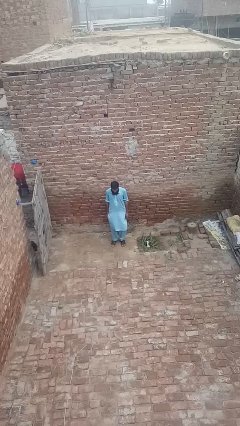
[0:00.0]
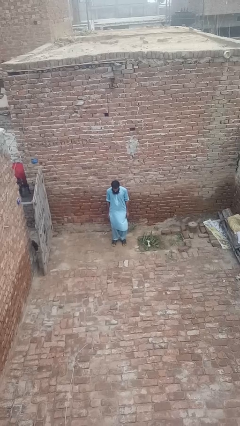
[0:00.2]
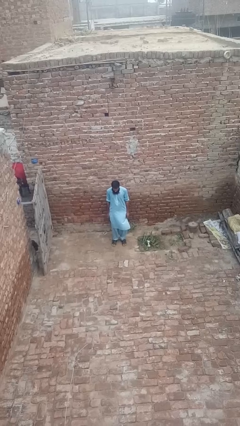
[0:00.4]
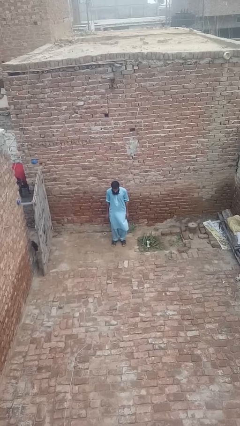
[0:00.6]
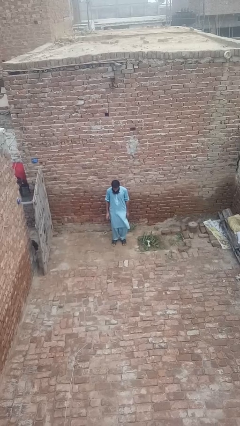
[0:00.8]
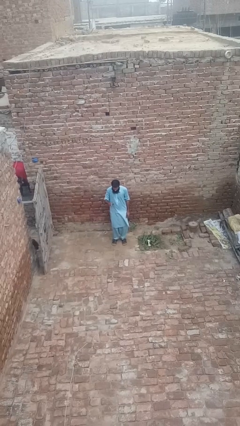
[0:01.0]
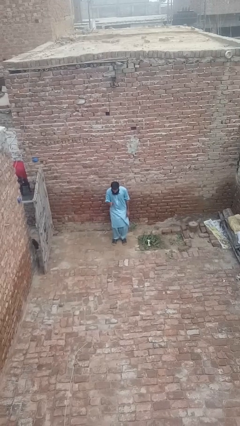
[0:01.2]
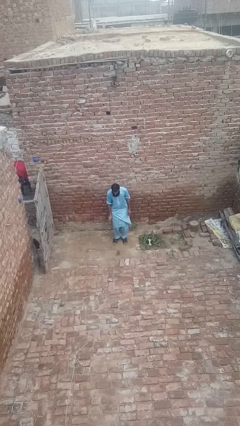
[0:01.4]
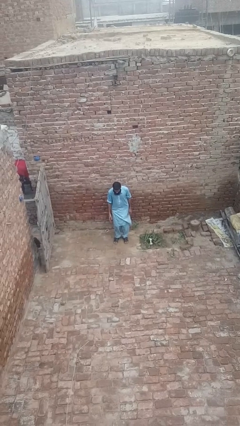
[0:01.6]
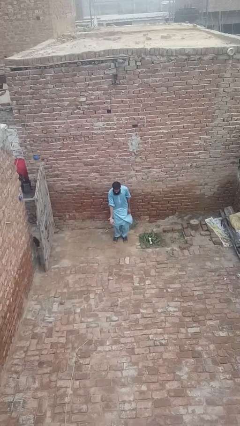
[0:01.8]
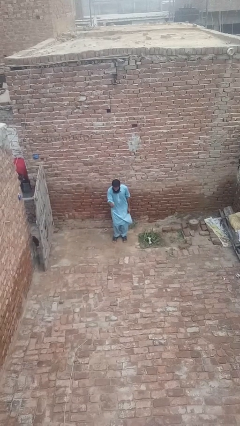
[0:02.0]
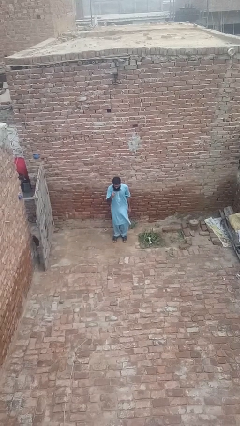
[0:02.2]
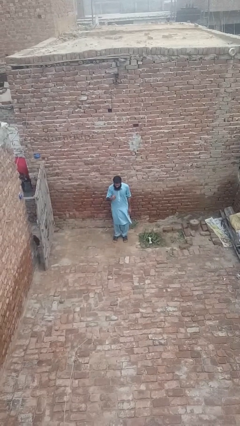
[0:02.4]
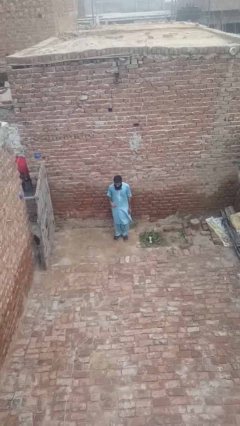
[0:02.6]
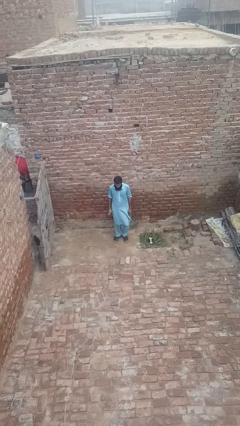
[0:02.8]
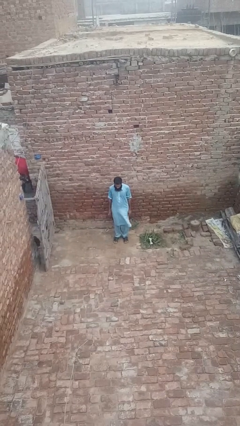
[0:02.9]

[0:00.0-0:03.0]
person bounces ball on floor

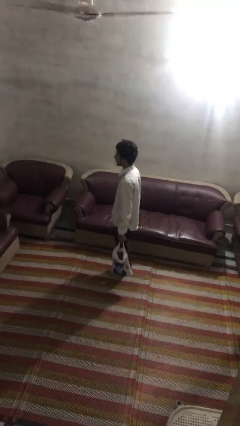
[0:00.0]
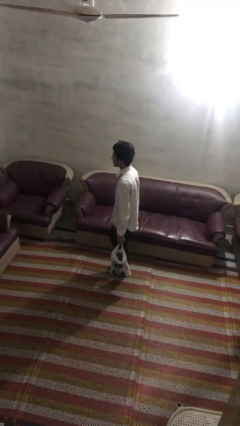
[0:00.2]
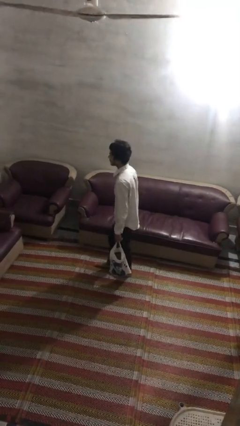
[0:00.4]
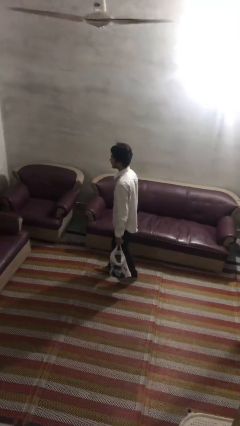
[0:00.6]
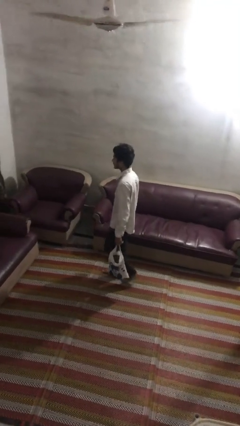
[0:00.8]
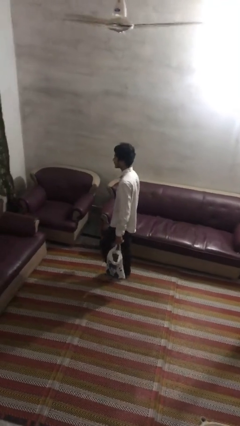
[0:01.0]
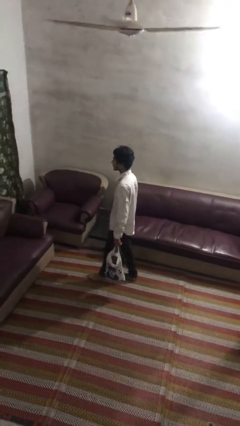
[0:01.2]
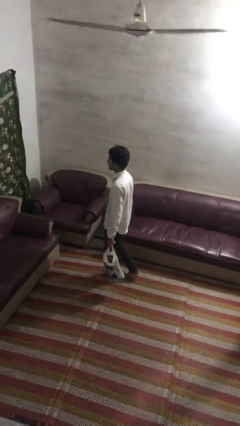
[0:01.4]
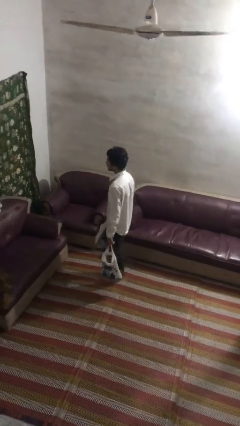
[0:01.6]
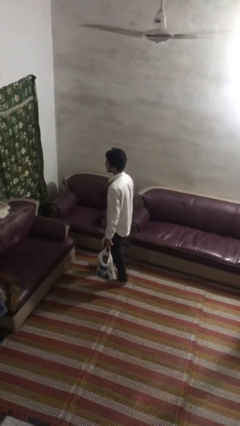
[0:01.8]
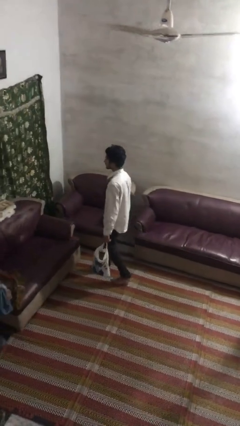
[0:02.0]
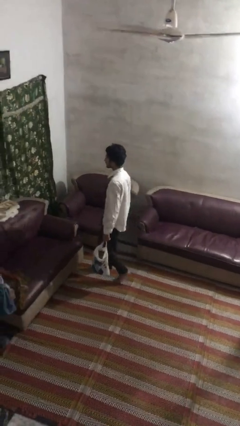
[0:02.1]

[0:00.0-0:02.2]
person carries groceries

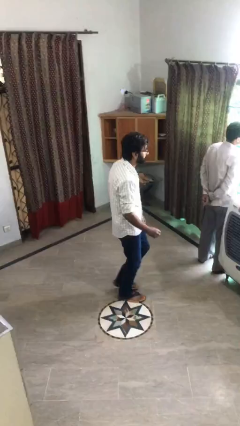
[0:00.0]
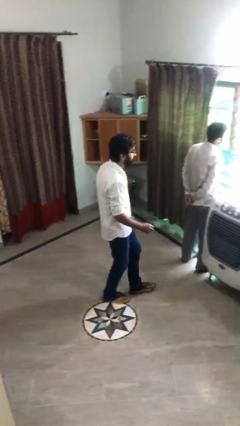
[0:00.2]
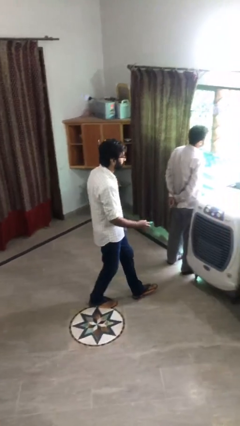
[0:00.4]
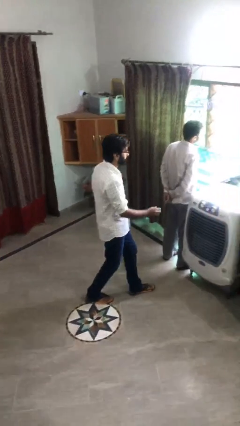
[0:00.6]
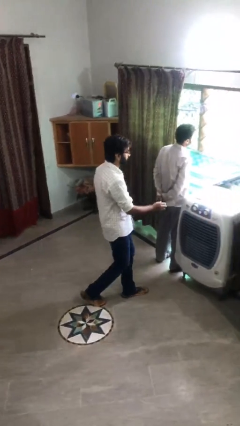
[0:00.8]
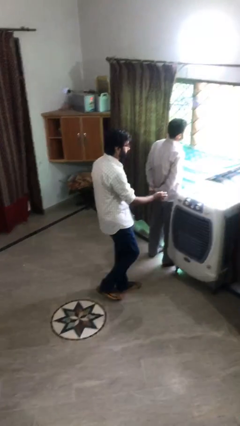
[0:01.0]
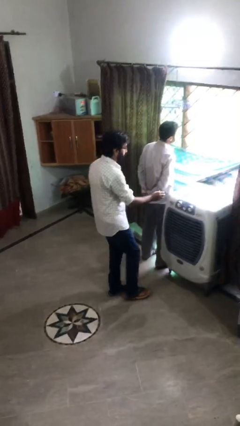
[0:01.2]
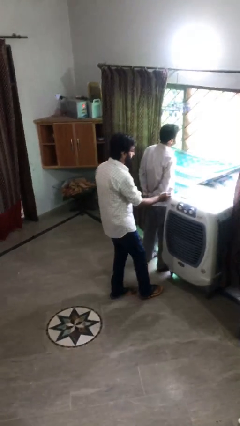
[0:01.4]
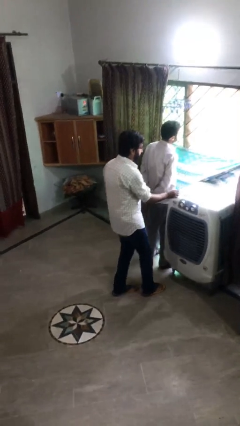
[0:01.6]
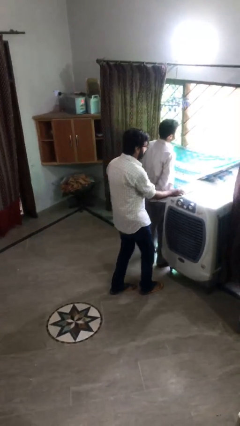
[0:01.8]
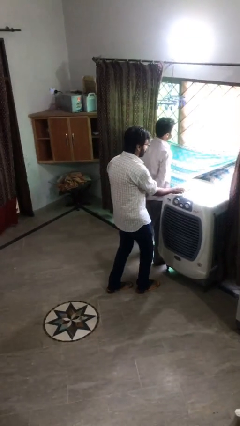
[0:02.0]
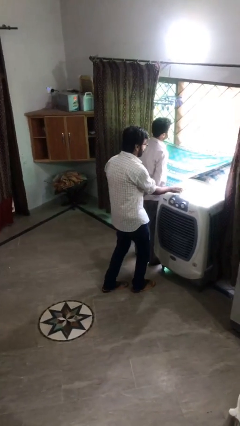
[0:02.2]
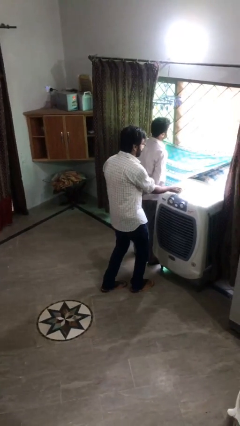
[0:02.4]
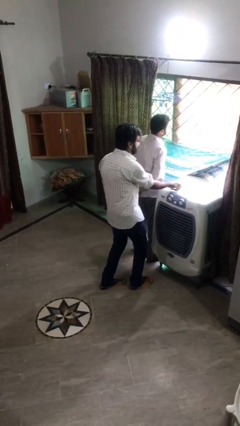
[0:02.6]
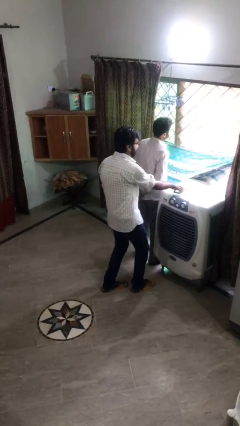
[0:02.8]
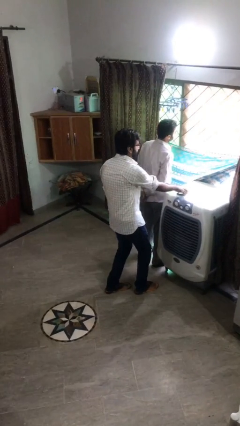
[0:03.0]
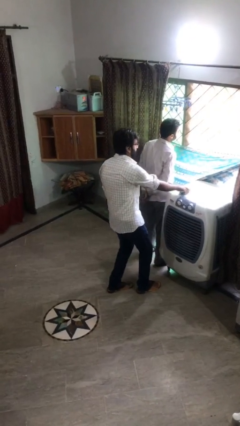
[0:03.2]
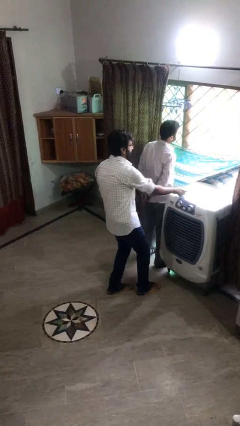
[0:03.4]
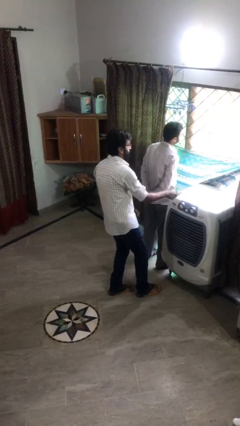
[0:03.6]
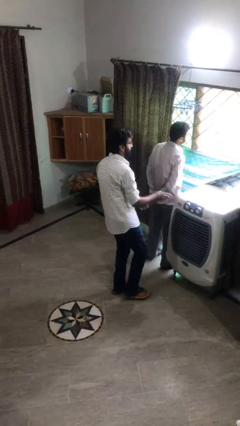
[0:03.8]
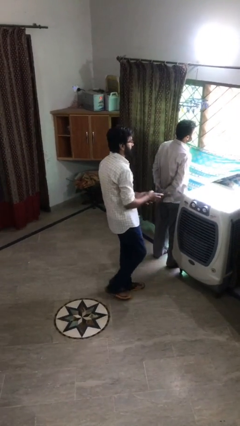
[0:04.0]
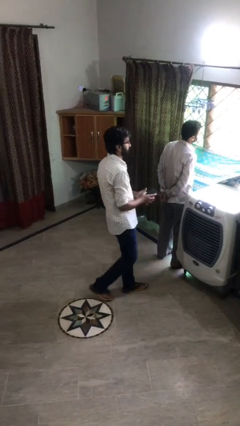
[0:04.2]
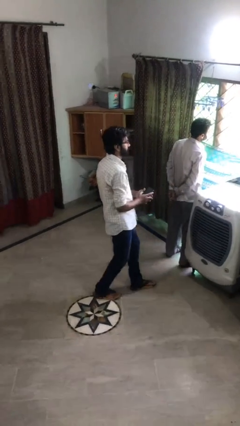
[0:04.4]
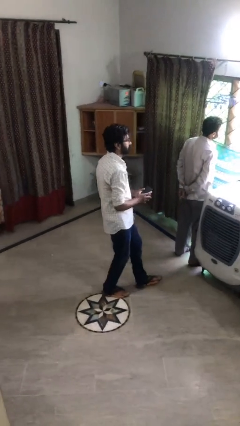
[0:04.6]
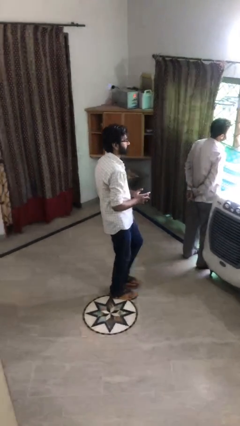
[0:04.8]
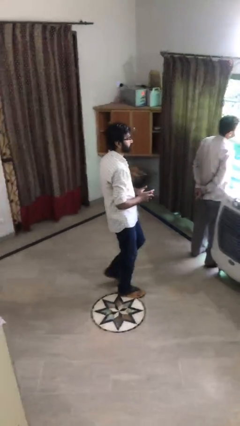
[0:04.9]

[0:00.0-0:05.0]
person steals object from person

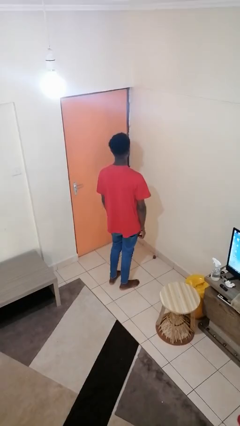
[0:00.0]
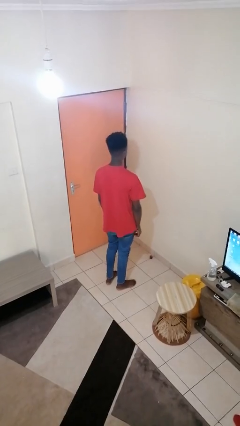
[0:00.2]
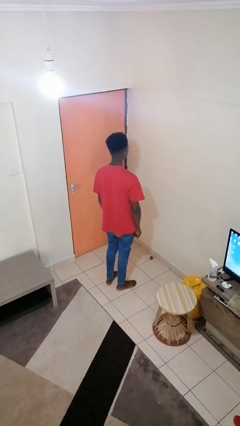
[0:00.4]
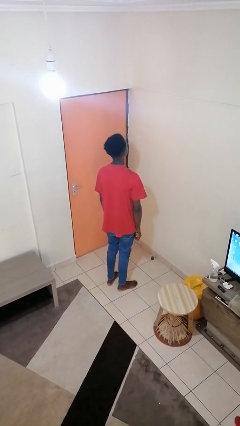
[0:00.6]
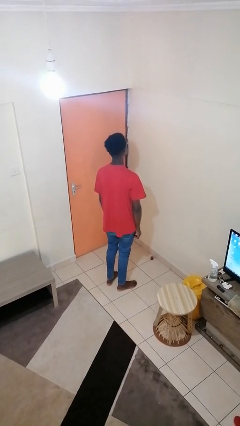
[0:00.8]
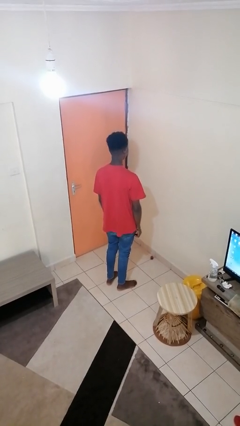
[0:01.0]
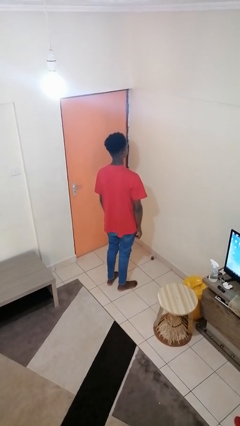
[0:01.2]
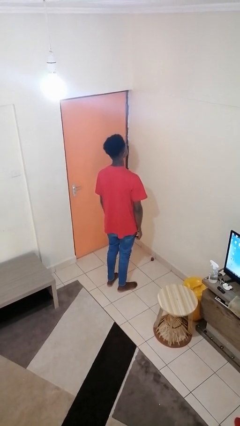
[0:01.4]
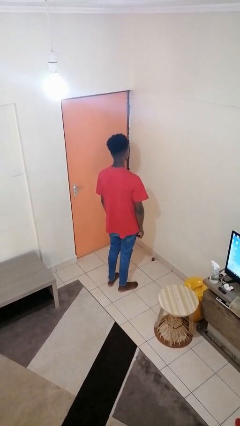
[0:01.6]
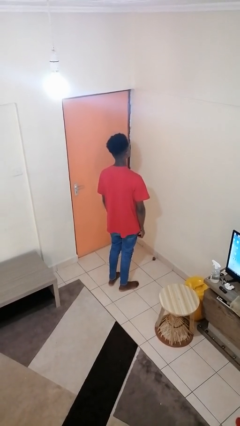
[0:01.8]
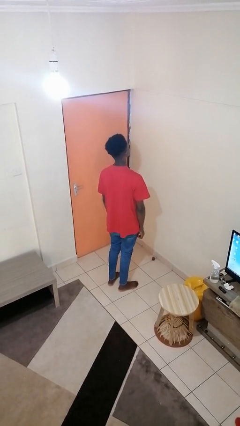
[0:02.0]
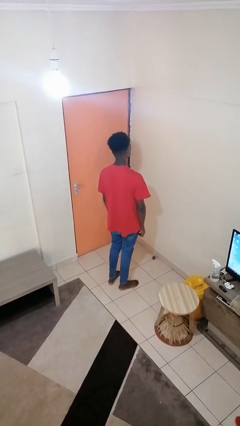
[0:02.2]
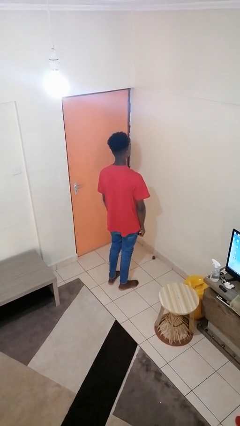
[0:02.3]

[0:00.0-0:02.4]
person nods head

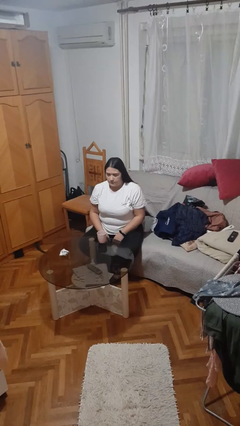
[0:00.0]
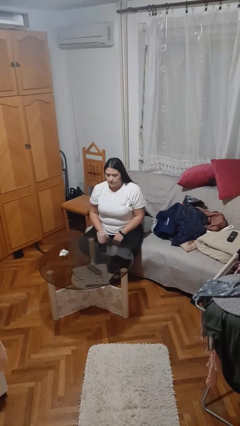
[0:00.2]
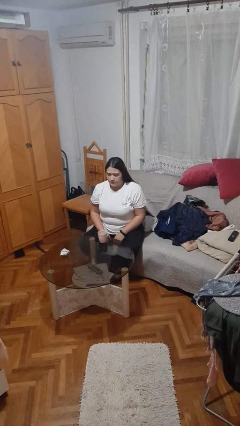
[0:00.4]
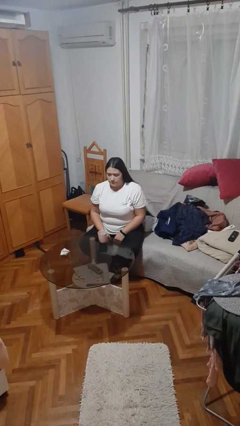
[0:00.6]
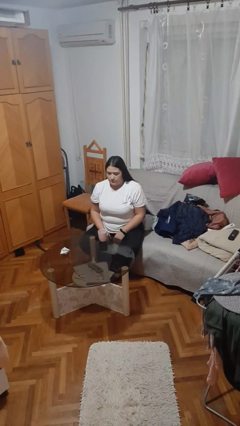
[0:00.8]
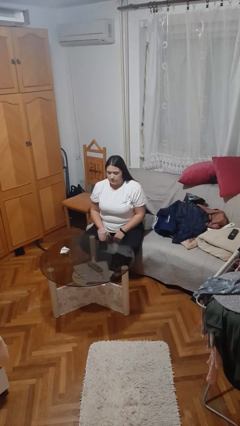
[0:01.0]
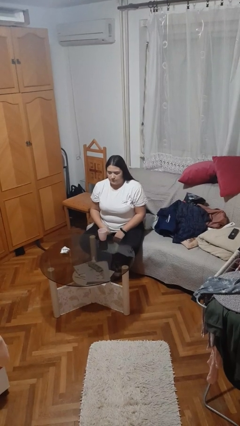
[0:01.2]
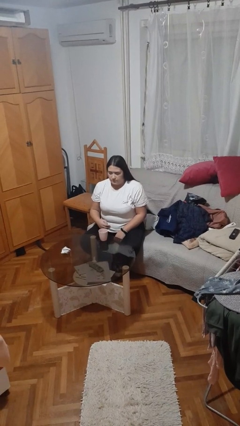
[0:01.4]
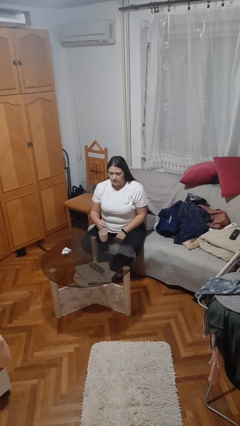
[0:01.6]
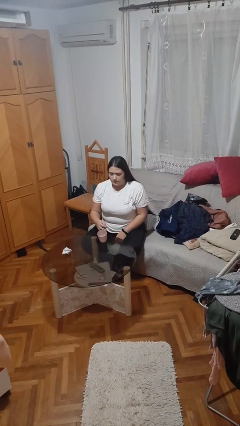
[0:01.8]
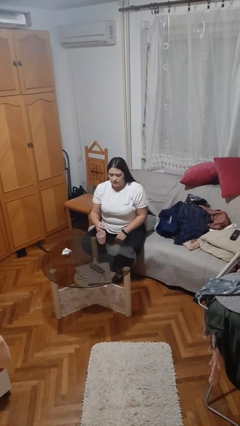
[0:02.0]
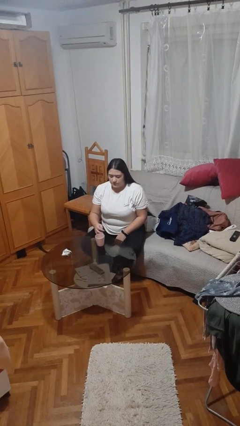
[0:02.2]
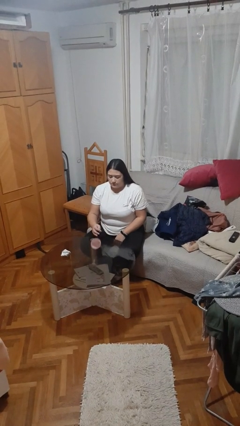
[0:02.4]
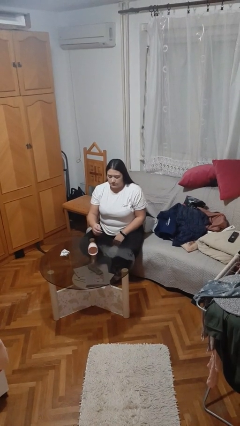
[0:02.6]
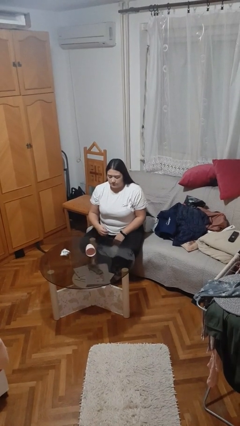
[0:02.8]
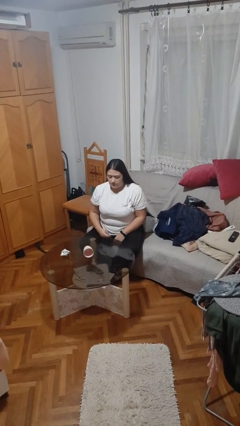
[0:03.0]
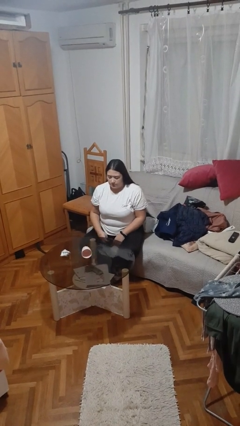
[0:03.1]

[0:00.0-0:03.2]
person spills on table

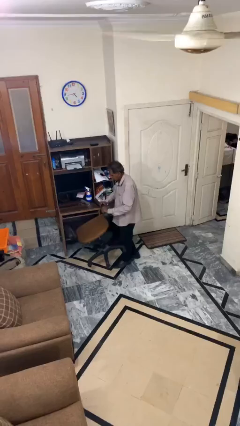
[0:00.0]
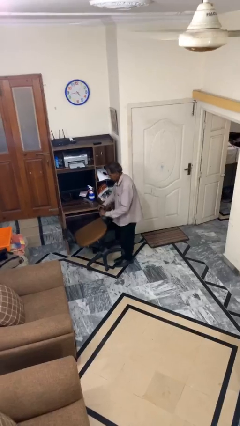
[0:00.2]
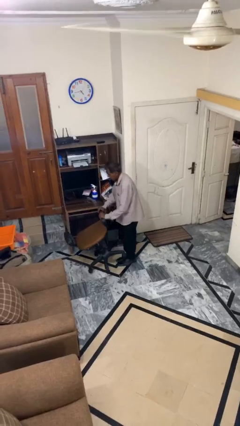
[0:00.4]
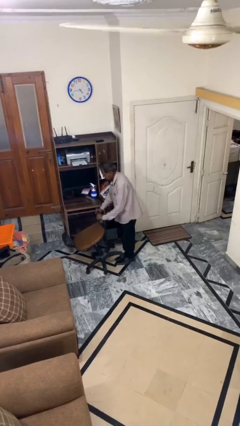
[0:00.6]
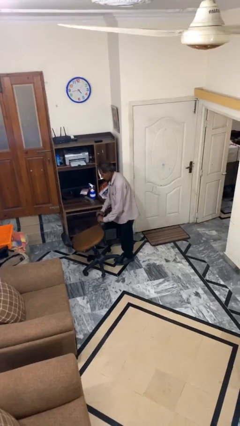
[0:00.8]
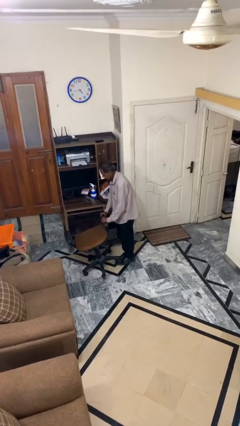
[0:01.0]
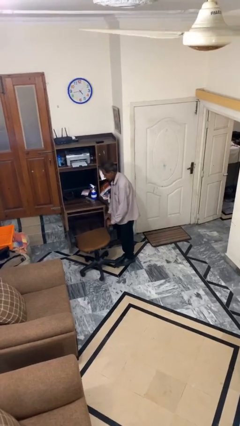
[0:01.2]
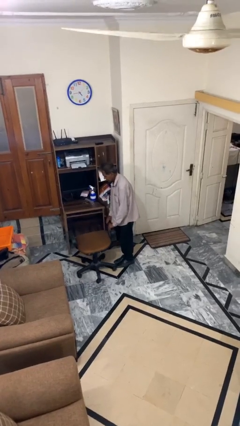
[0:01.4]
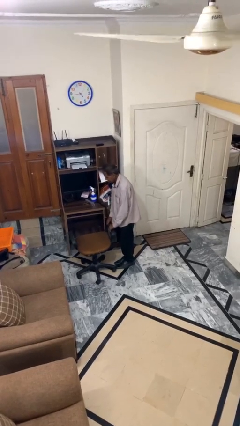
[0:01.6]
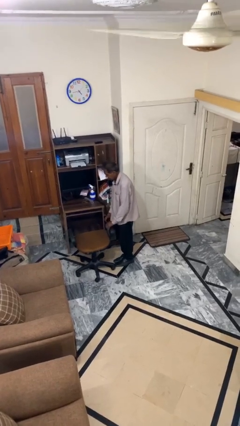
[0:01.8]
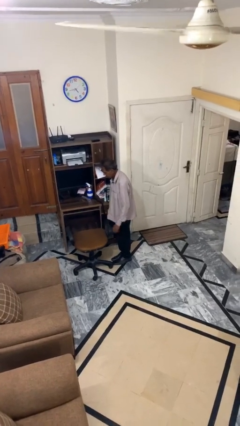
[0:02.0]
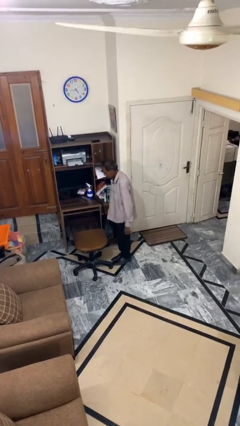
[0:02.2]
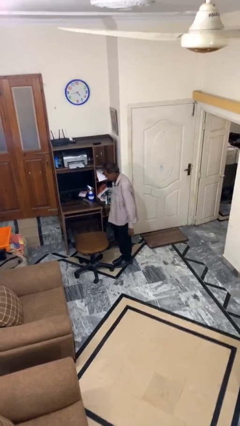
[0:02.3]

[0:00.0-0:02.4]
person puts down object on floor
